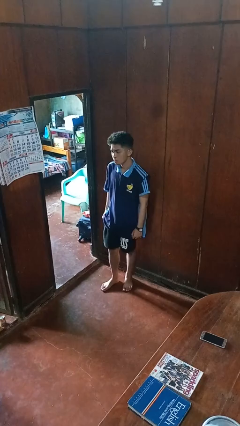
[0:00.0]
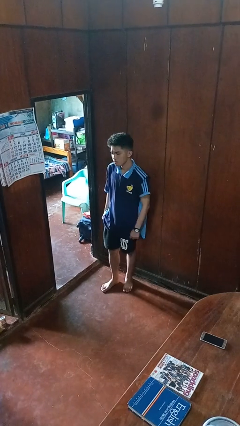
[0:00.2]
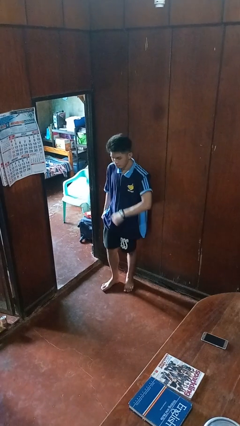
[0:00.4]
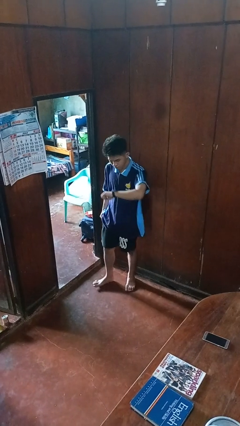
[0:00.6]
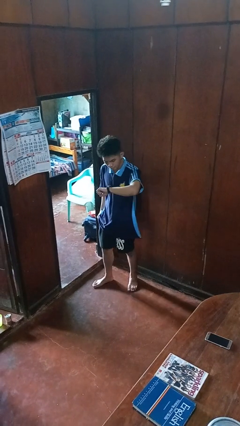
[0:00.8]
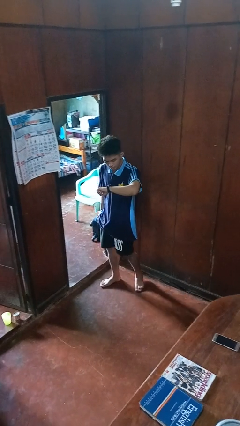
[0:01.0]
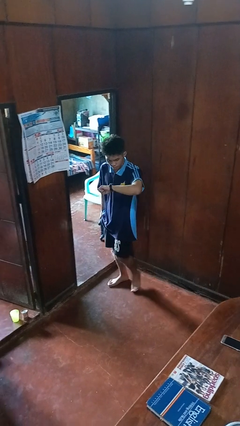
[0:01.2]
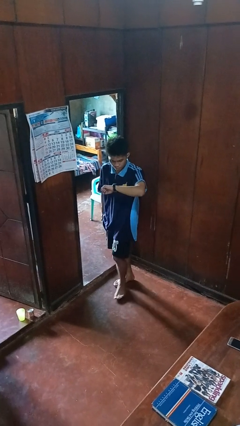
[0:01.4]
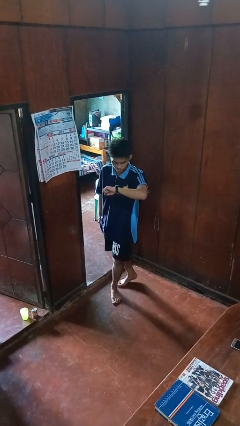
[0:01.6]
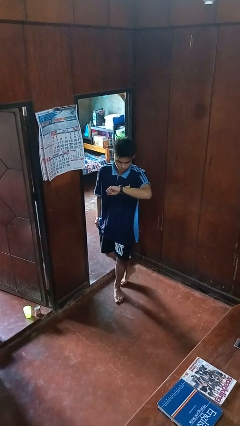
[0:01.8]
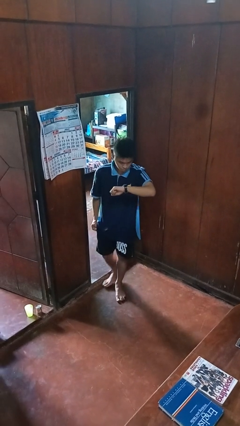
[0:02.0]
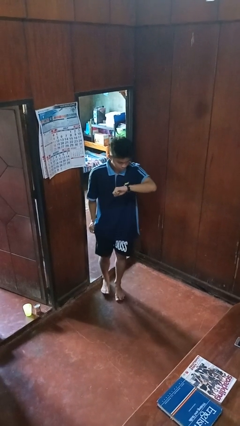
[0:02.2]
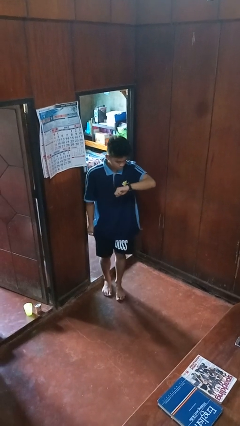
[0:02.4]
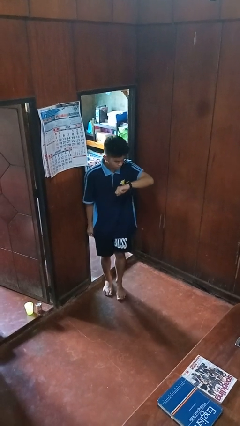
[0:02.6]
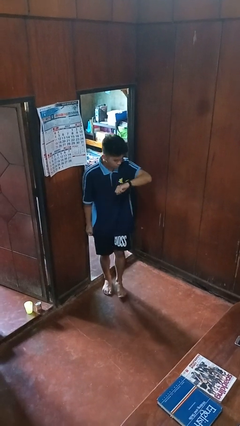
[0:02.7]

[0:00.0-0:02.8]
person looks at wristwatch

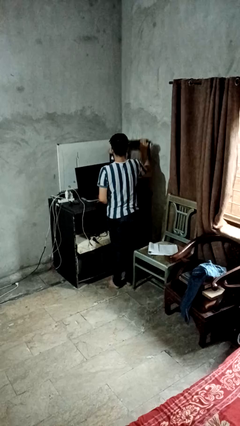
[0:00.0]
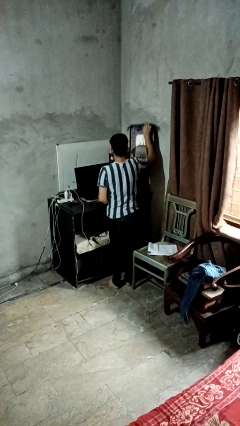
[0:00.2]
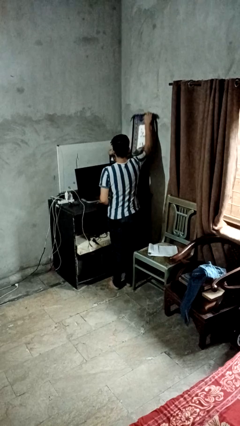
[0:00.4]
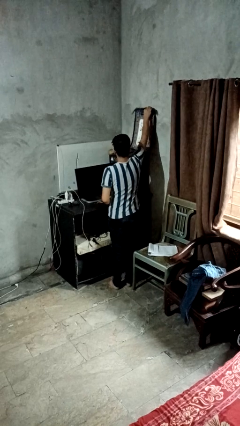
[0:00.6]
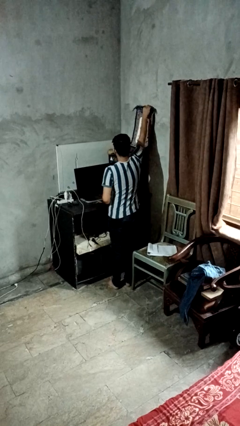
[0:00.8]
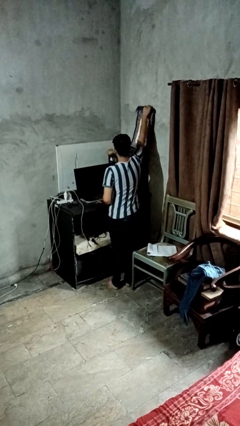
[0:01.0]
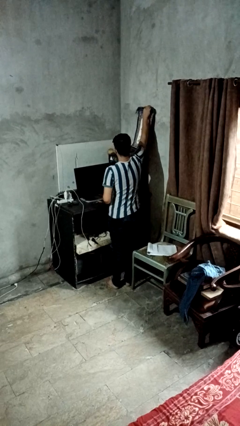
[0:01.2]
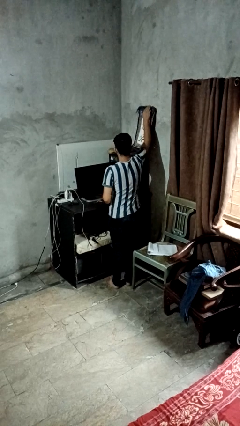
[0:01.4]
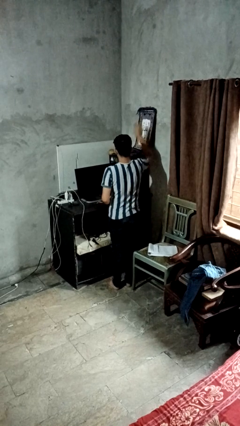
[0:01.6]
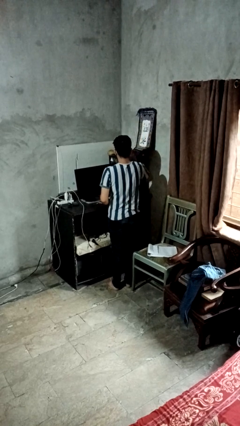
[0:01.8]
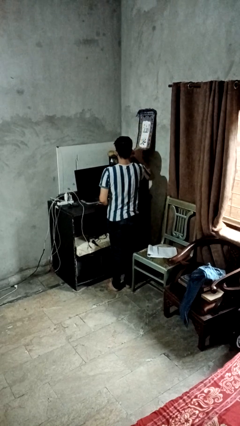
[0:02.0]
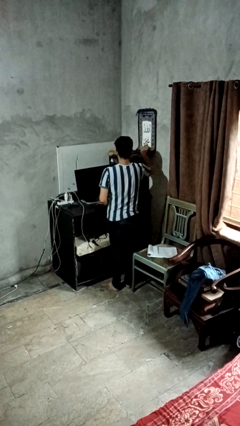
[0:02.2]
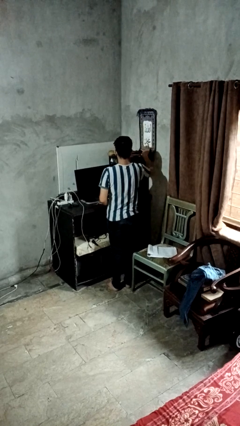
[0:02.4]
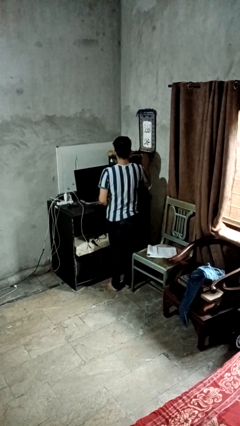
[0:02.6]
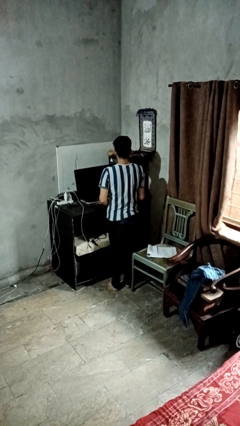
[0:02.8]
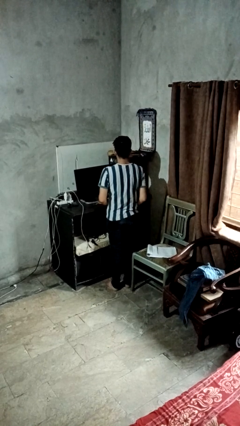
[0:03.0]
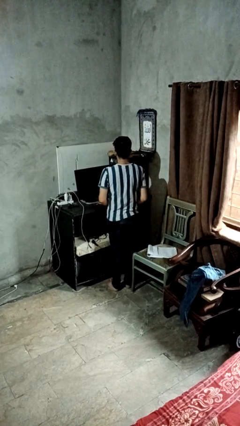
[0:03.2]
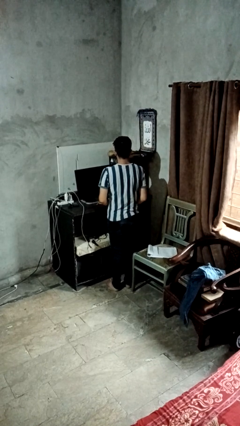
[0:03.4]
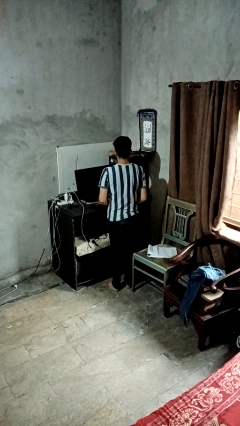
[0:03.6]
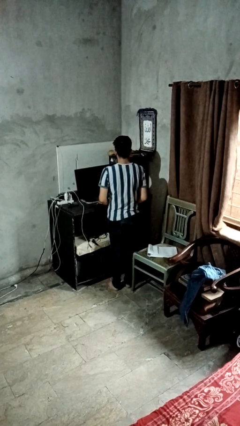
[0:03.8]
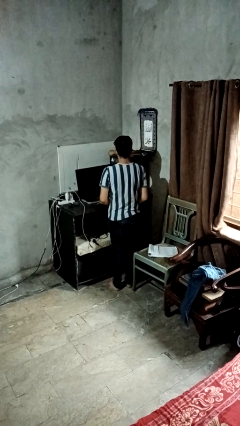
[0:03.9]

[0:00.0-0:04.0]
person puts up picture frame

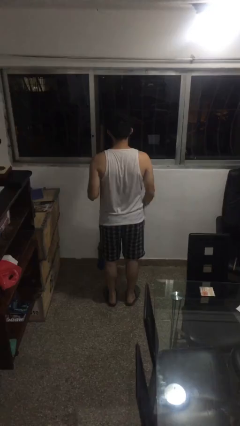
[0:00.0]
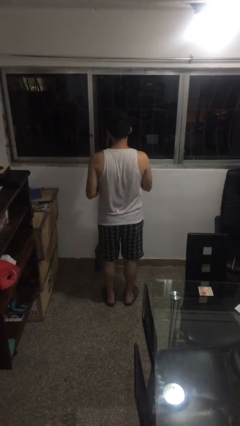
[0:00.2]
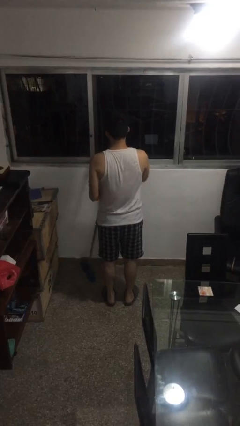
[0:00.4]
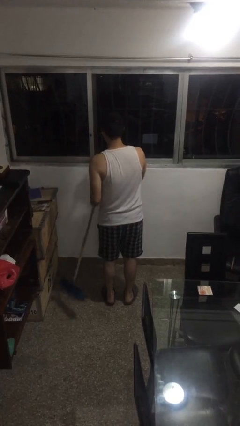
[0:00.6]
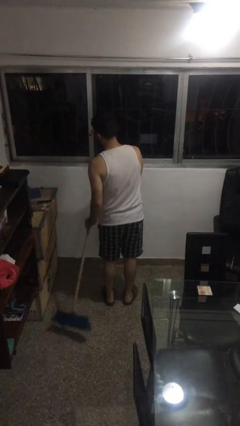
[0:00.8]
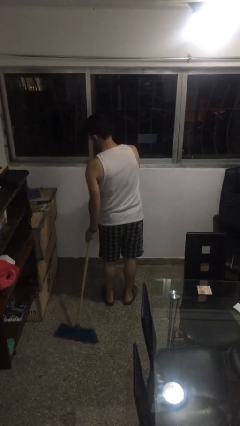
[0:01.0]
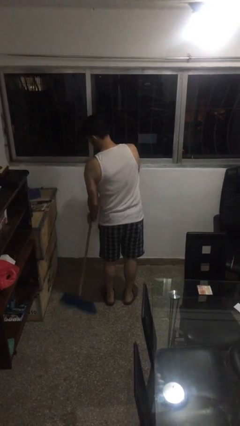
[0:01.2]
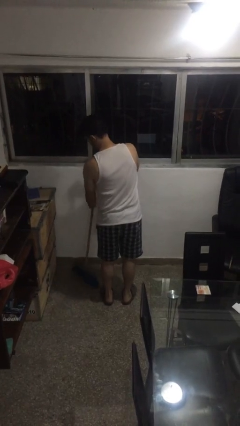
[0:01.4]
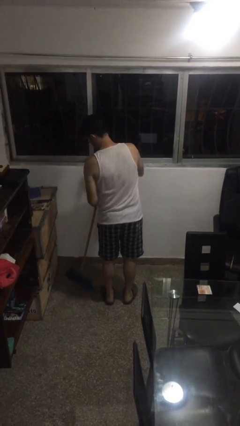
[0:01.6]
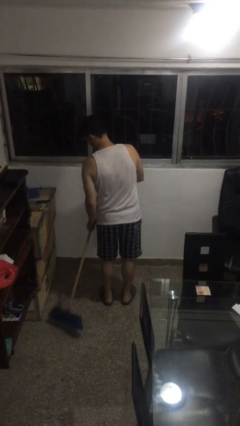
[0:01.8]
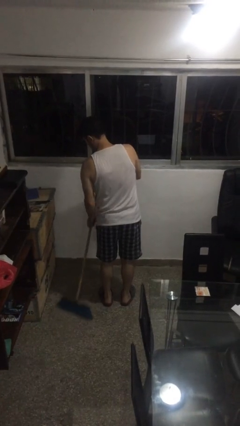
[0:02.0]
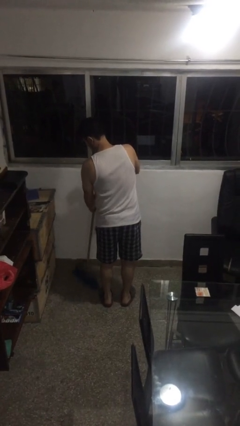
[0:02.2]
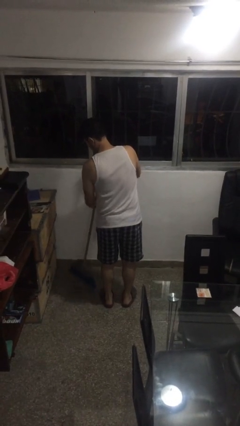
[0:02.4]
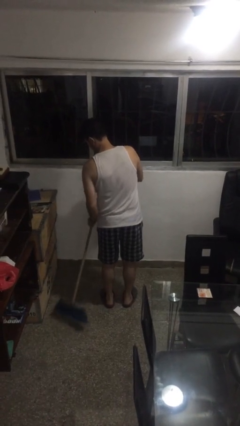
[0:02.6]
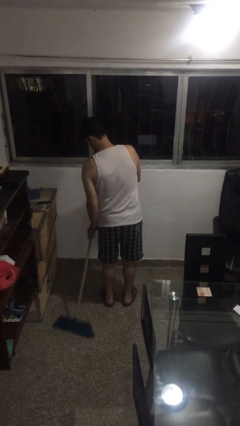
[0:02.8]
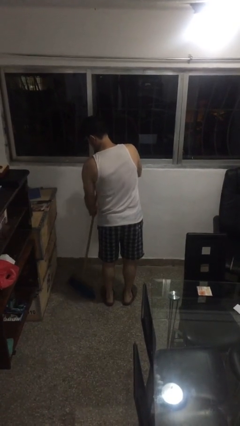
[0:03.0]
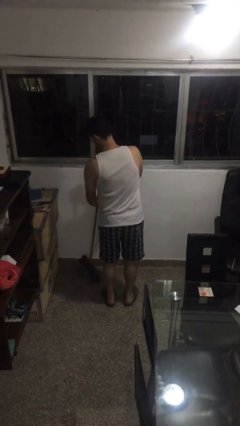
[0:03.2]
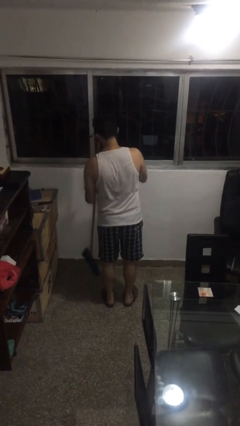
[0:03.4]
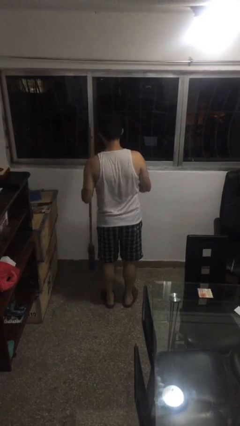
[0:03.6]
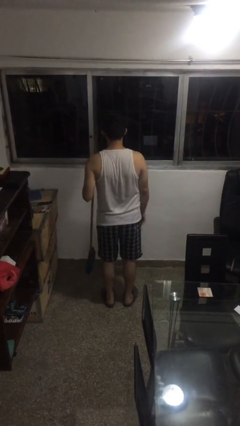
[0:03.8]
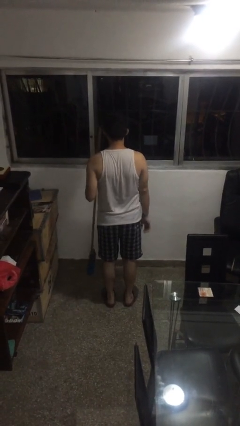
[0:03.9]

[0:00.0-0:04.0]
person sweeps floor

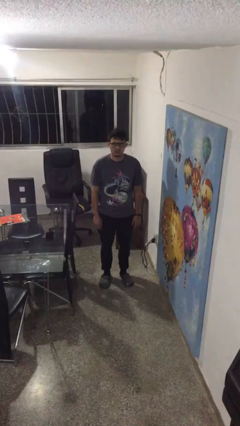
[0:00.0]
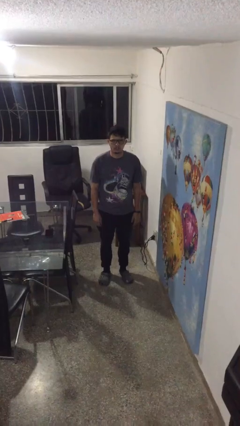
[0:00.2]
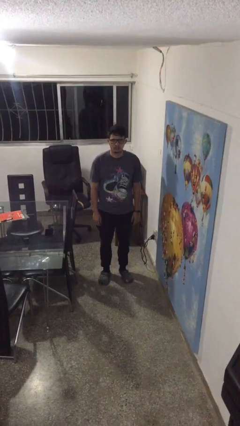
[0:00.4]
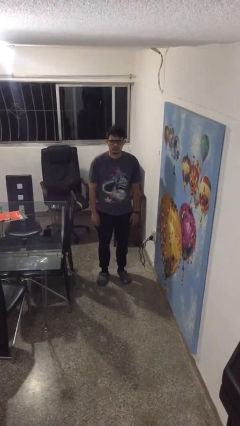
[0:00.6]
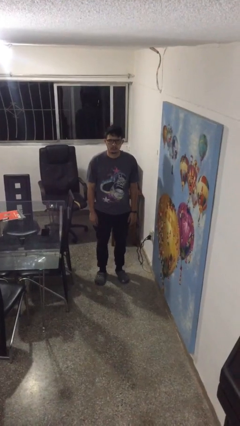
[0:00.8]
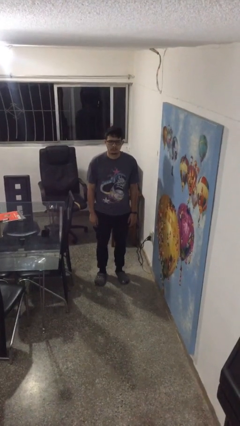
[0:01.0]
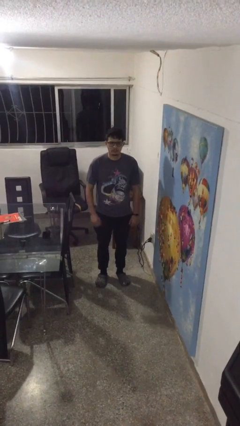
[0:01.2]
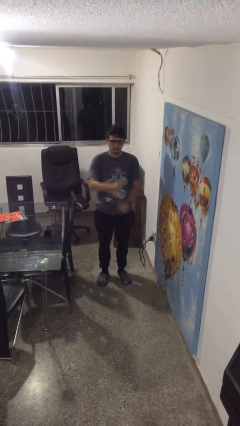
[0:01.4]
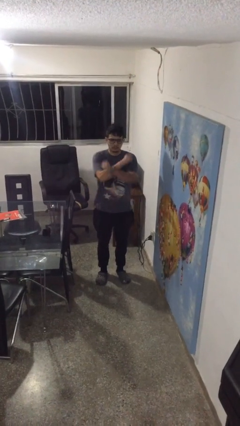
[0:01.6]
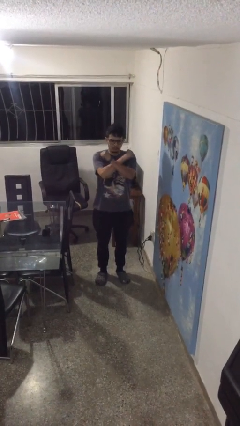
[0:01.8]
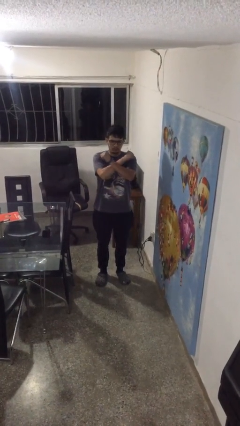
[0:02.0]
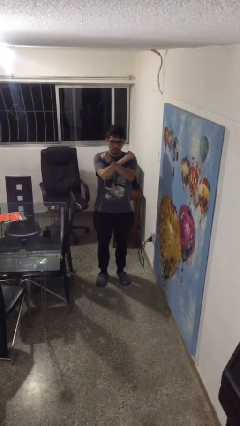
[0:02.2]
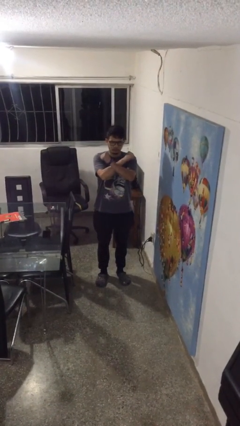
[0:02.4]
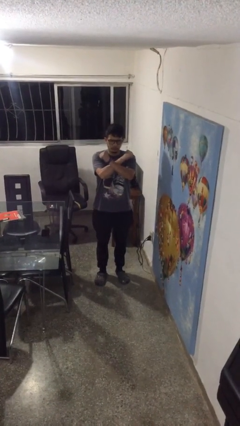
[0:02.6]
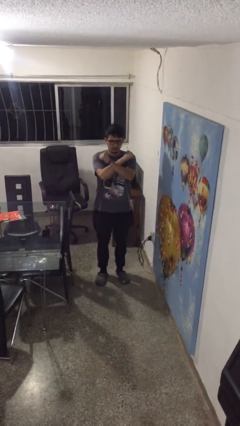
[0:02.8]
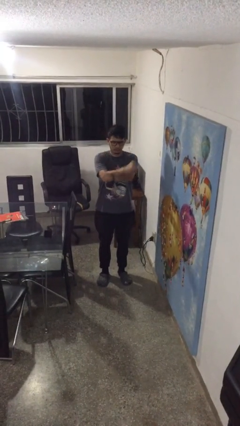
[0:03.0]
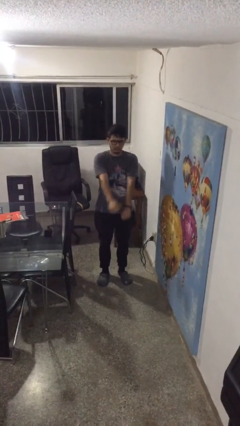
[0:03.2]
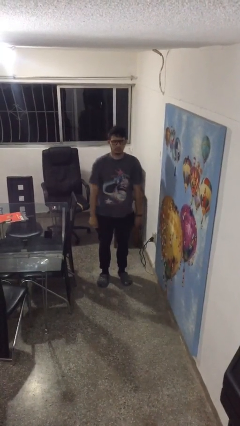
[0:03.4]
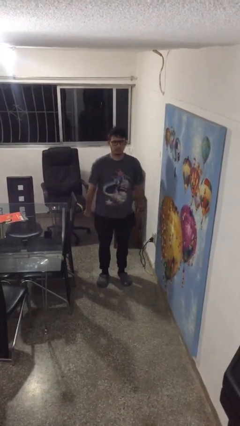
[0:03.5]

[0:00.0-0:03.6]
person gestures arms x

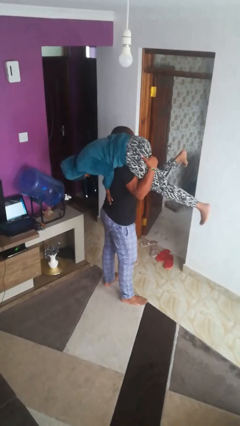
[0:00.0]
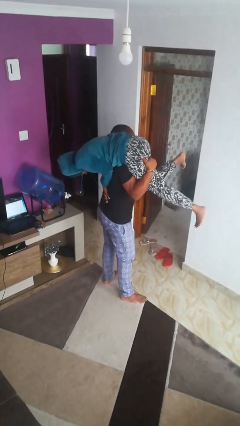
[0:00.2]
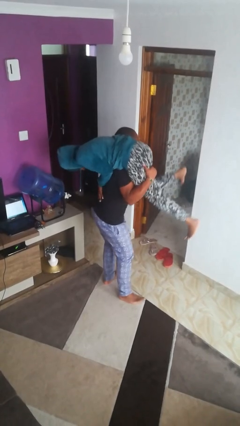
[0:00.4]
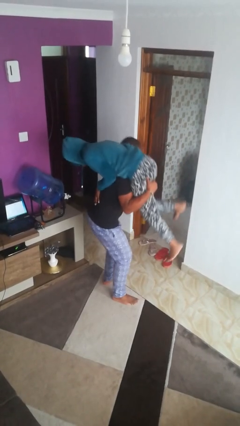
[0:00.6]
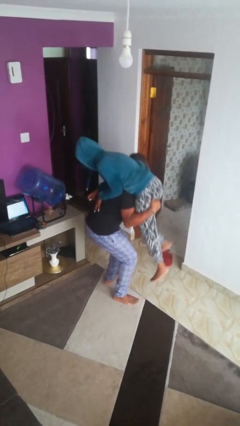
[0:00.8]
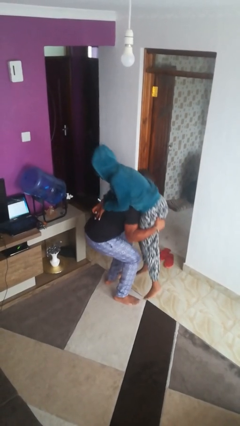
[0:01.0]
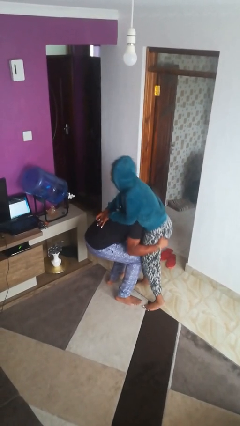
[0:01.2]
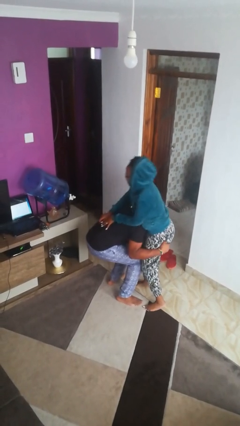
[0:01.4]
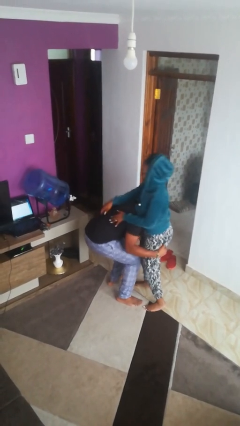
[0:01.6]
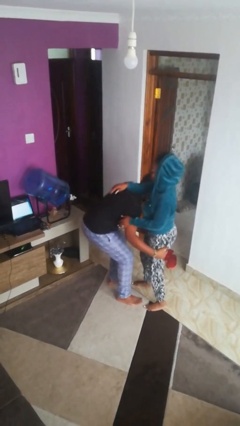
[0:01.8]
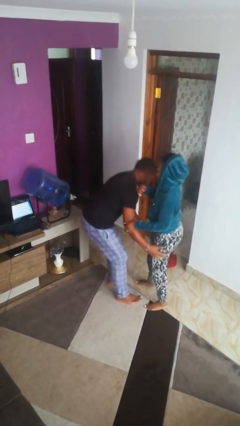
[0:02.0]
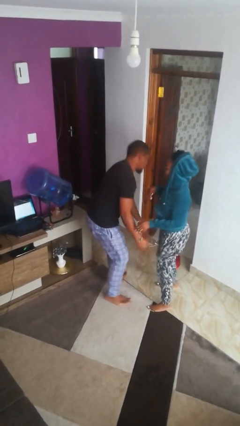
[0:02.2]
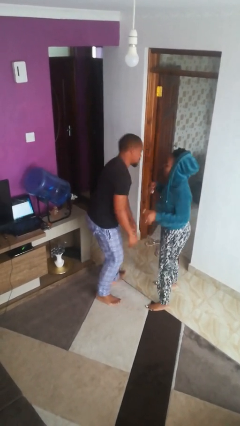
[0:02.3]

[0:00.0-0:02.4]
person puts down person

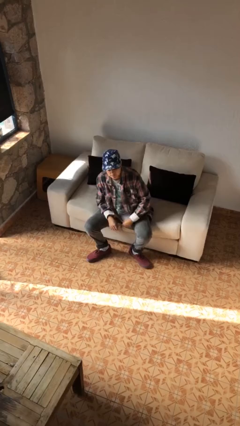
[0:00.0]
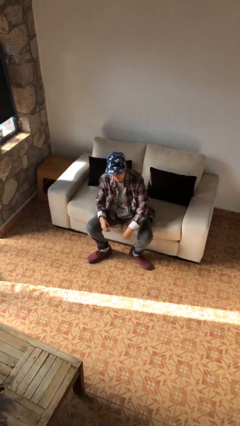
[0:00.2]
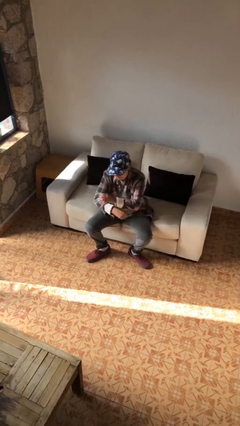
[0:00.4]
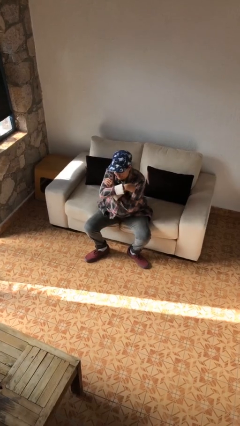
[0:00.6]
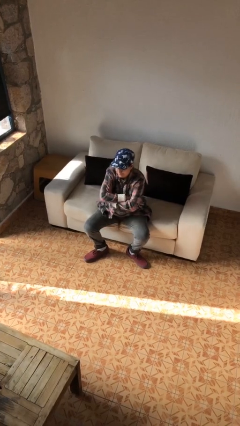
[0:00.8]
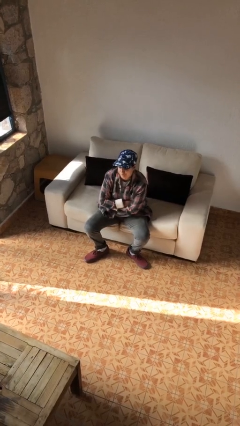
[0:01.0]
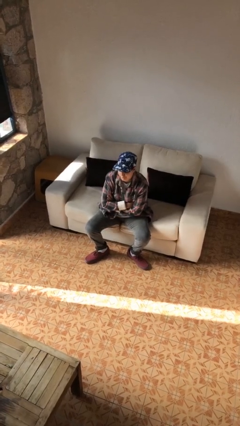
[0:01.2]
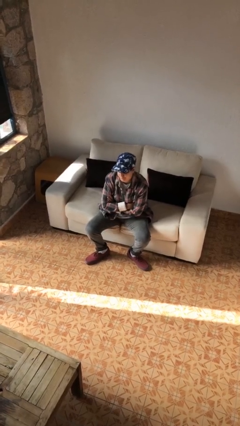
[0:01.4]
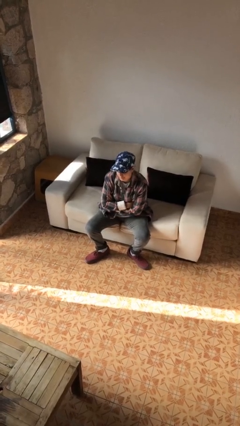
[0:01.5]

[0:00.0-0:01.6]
person crosses arms
